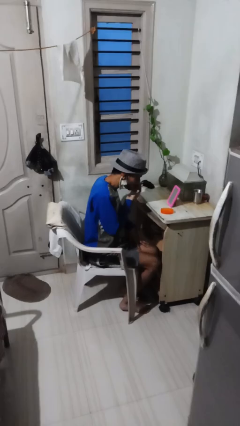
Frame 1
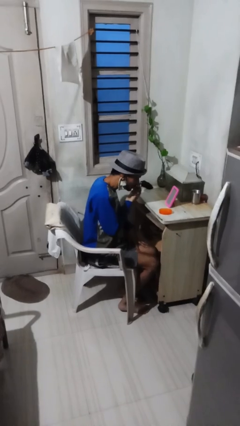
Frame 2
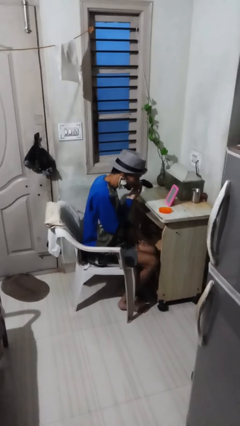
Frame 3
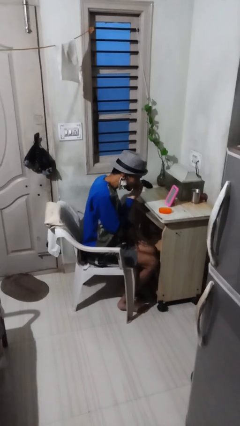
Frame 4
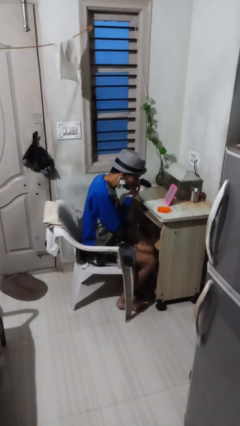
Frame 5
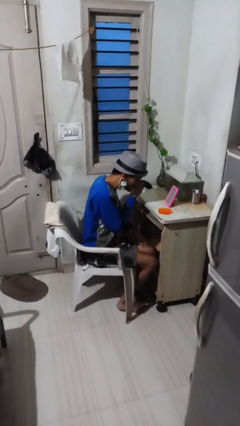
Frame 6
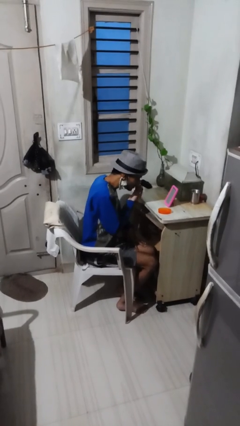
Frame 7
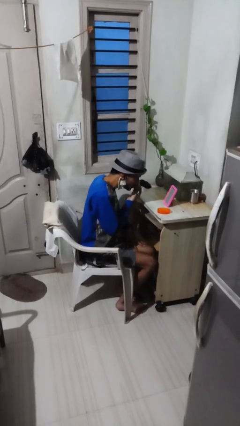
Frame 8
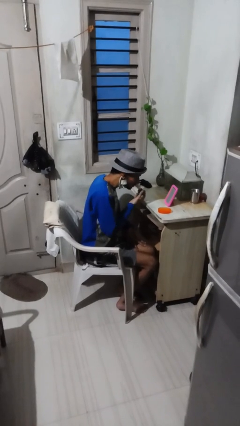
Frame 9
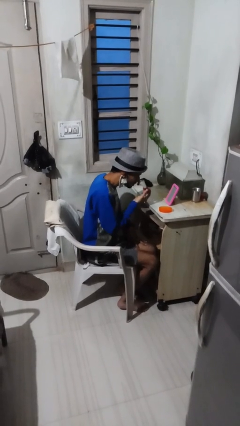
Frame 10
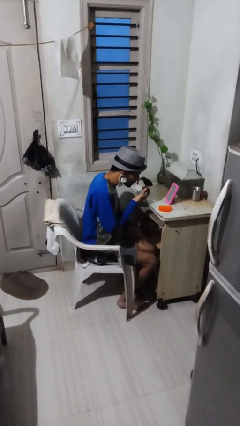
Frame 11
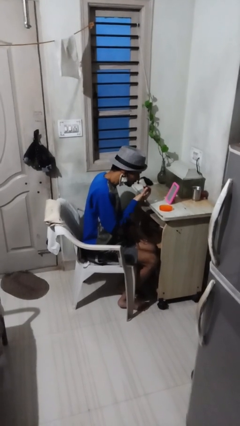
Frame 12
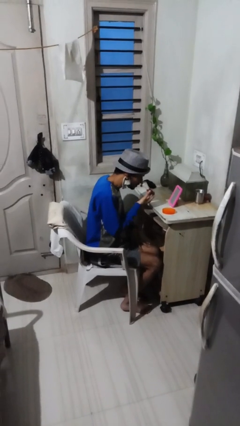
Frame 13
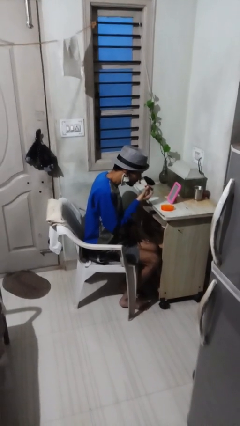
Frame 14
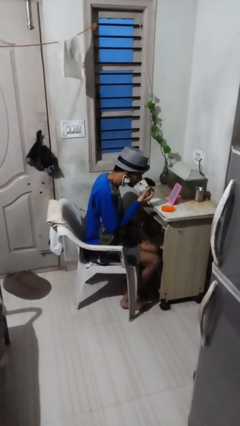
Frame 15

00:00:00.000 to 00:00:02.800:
person applies foundation makeup

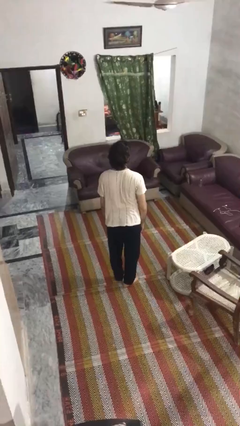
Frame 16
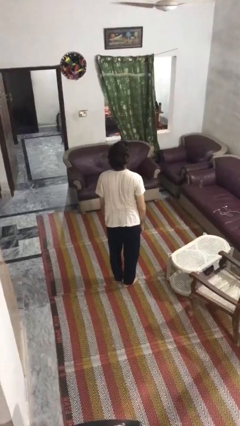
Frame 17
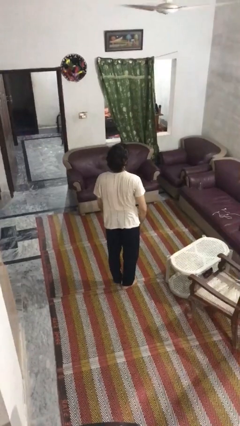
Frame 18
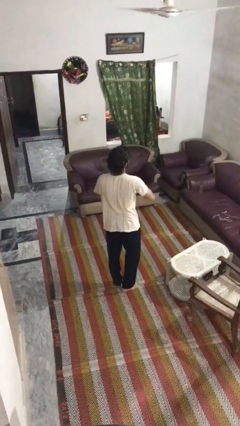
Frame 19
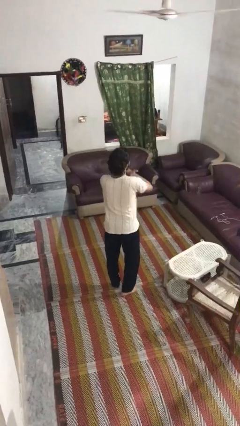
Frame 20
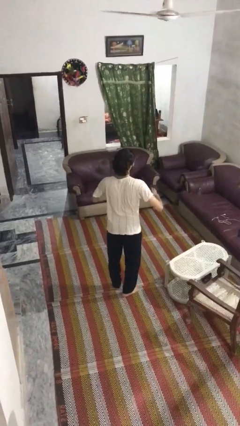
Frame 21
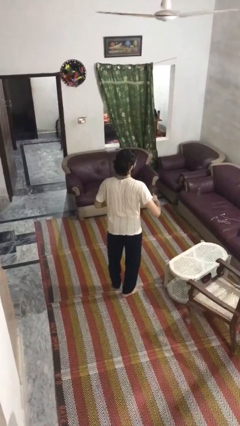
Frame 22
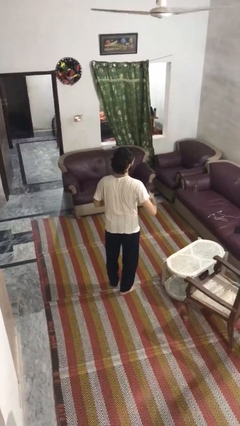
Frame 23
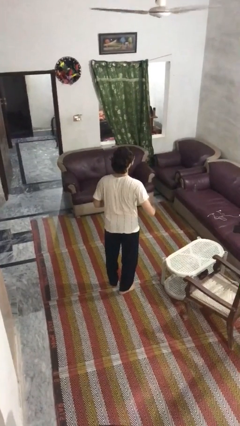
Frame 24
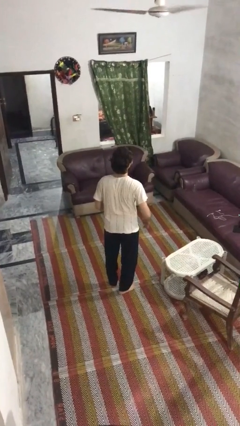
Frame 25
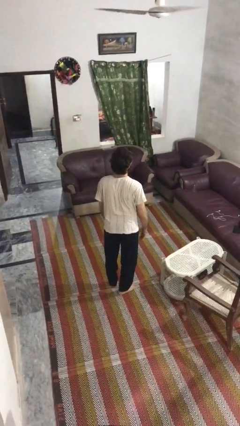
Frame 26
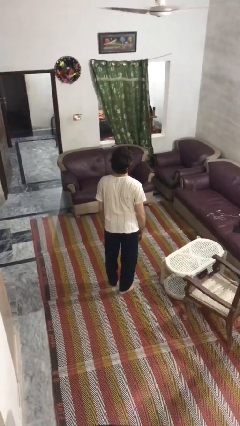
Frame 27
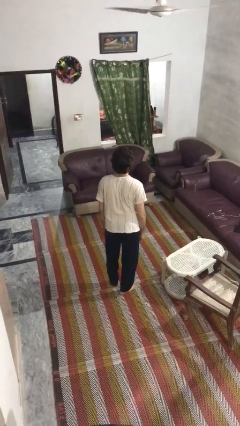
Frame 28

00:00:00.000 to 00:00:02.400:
person karate chop

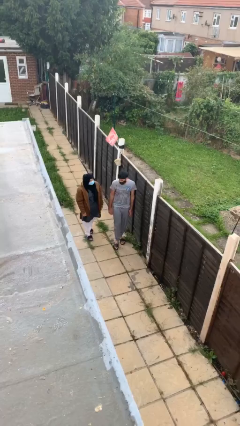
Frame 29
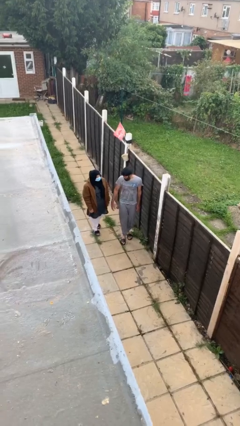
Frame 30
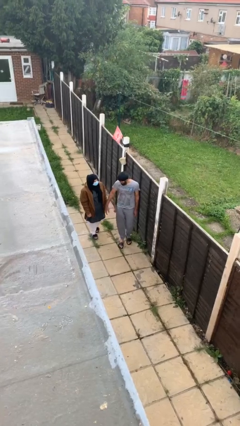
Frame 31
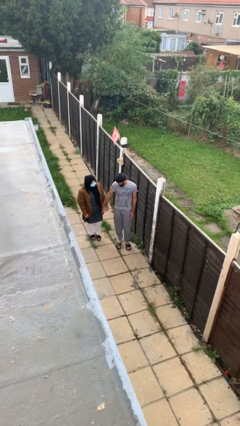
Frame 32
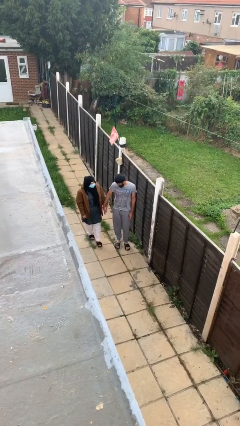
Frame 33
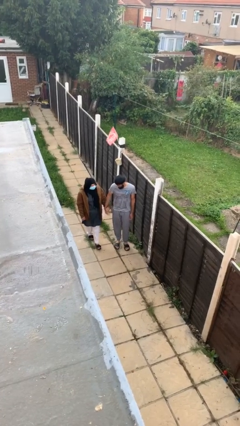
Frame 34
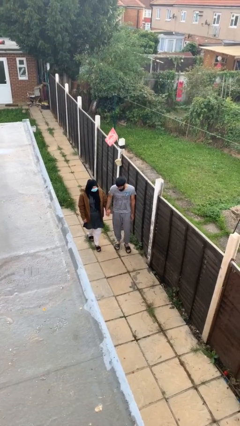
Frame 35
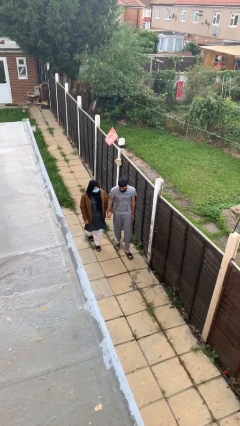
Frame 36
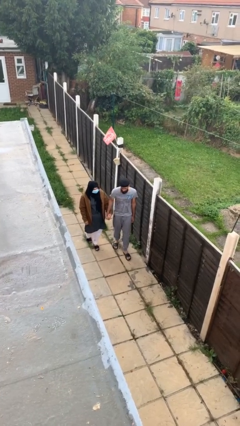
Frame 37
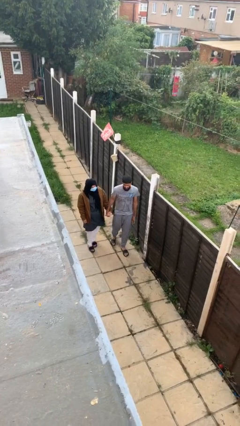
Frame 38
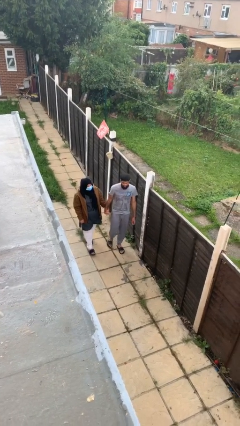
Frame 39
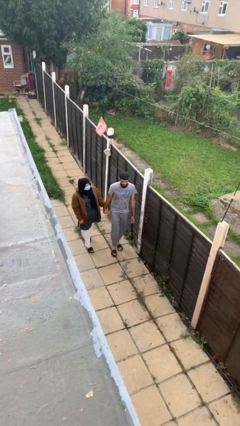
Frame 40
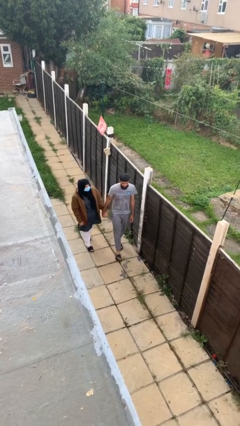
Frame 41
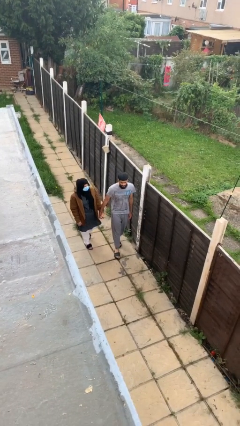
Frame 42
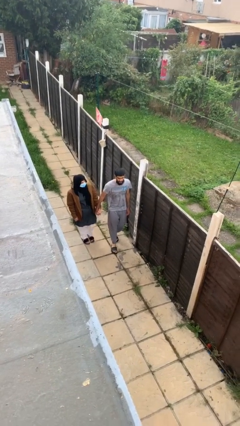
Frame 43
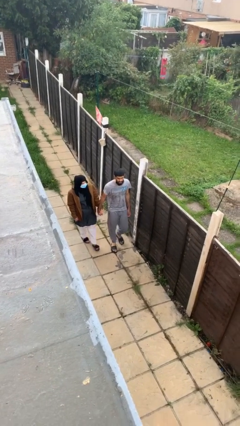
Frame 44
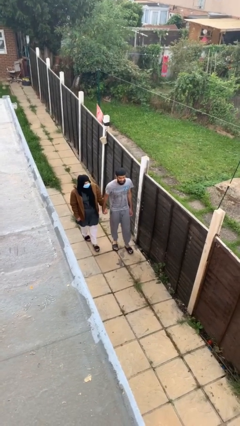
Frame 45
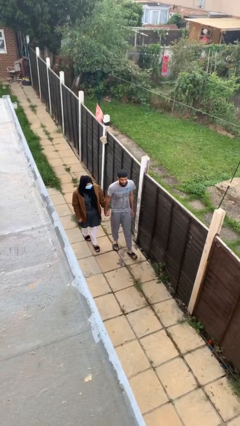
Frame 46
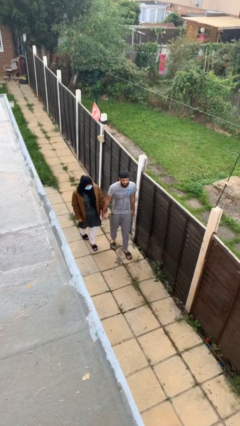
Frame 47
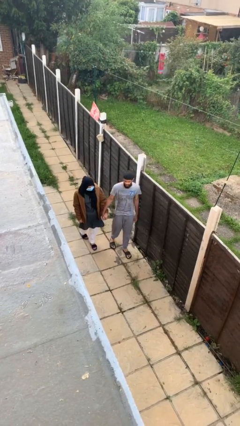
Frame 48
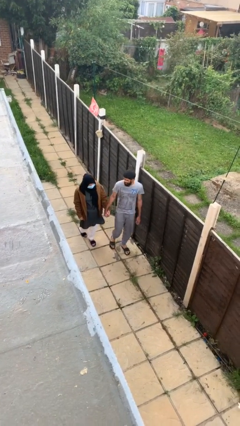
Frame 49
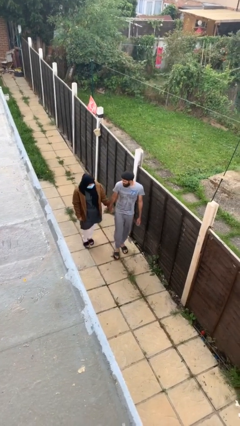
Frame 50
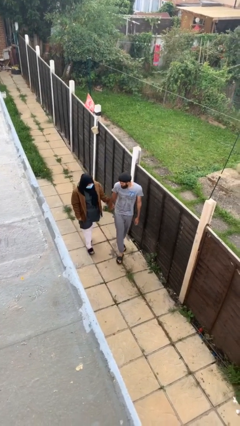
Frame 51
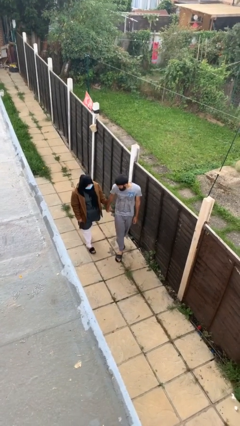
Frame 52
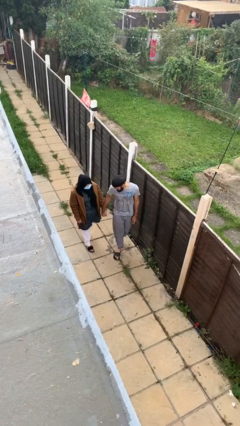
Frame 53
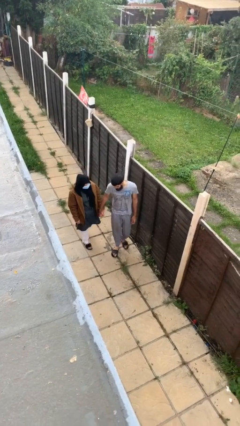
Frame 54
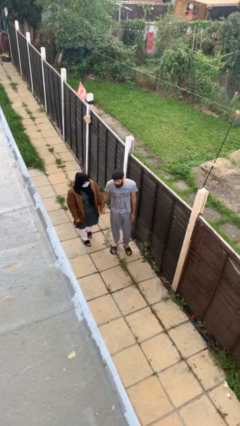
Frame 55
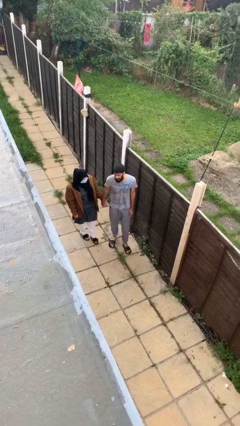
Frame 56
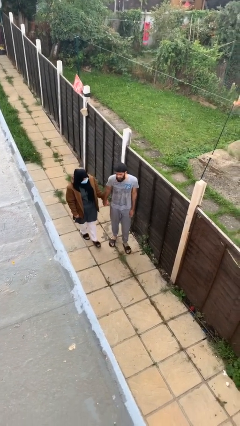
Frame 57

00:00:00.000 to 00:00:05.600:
person holds hand

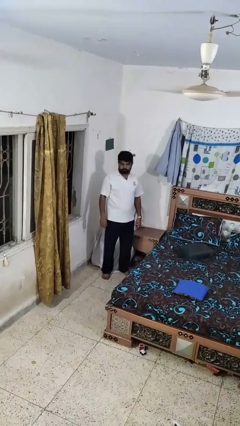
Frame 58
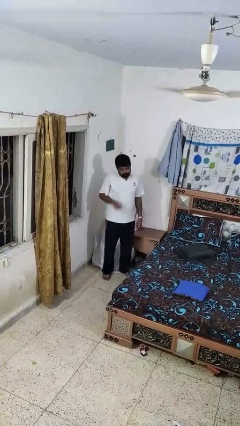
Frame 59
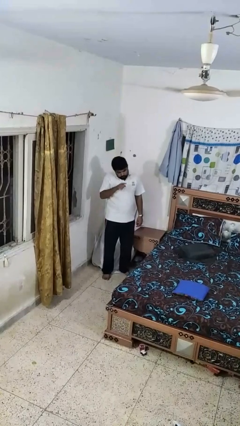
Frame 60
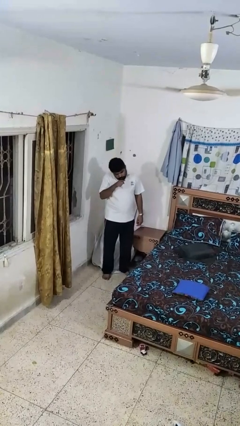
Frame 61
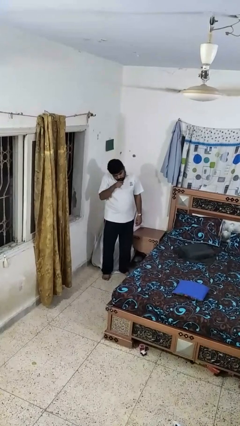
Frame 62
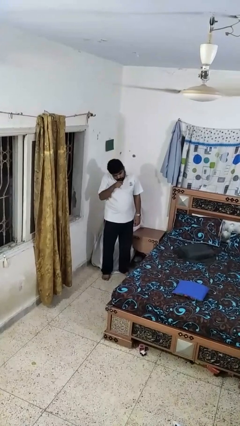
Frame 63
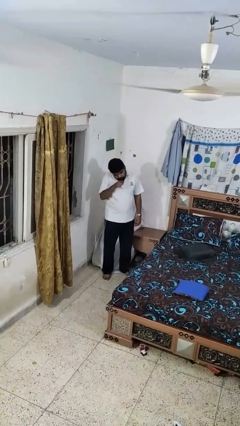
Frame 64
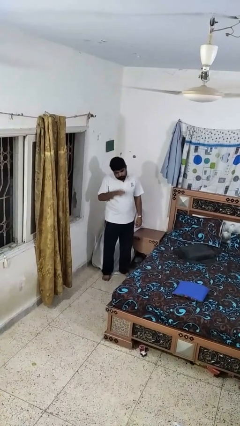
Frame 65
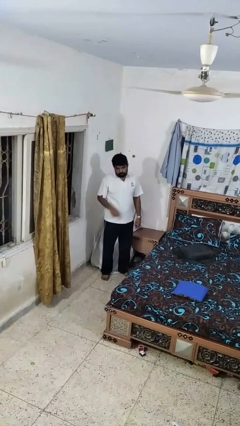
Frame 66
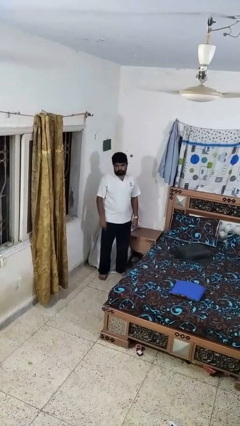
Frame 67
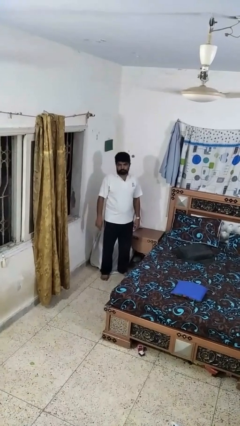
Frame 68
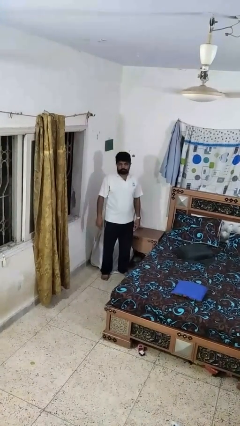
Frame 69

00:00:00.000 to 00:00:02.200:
person points at person

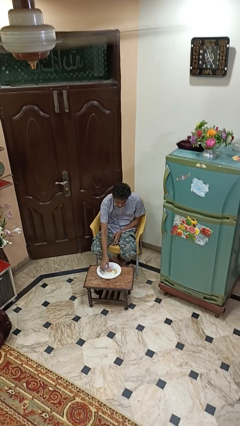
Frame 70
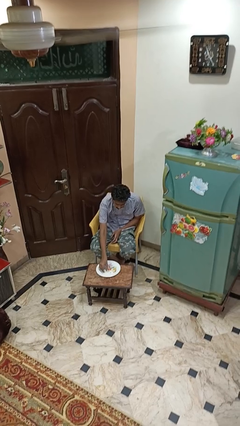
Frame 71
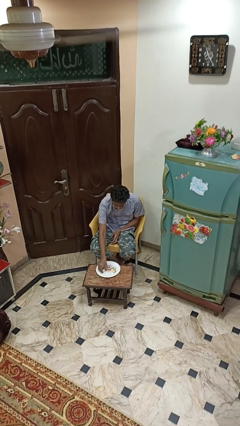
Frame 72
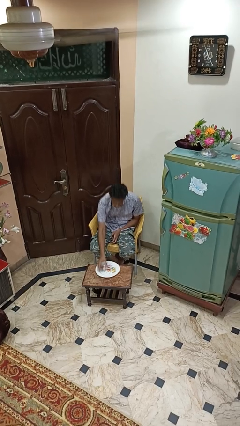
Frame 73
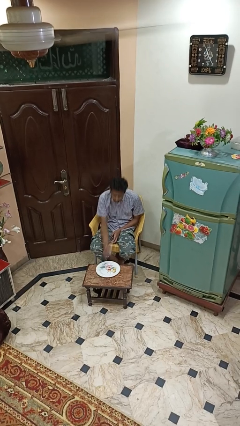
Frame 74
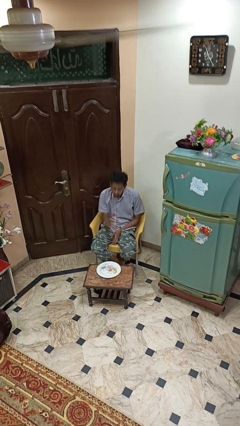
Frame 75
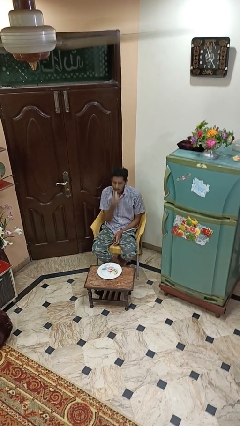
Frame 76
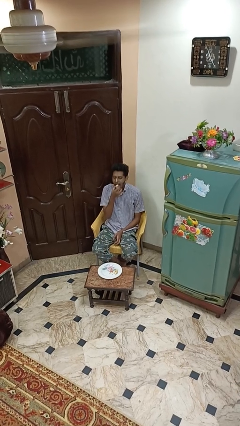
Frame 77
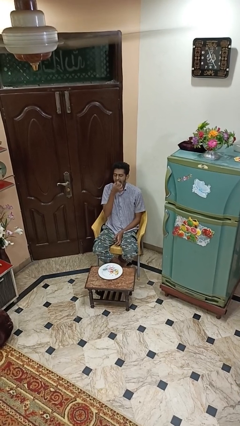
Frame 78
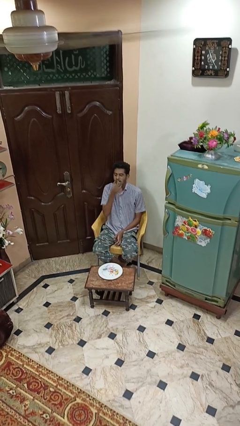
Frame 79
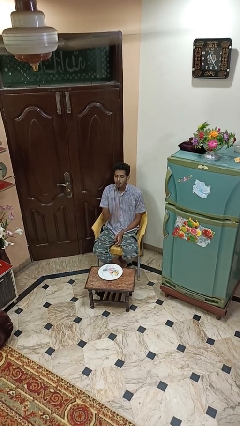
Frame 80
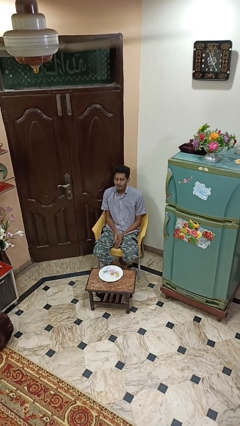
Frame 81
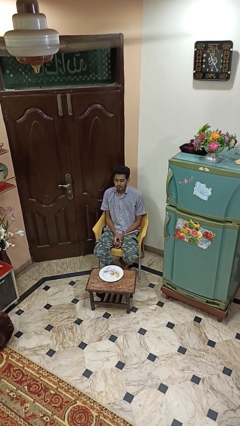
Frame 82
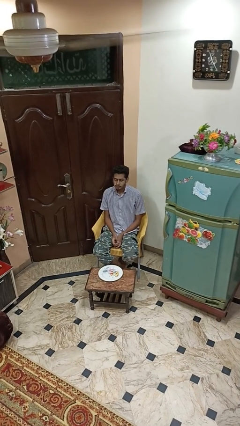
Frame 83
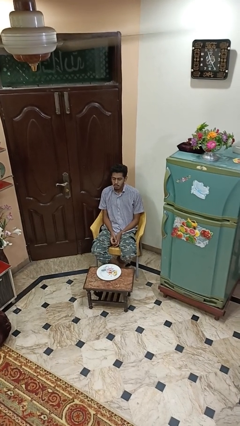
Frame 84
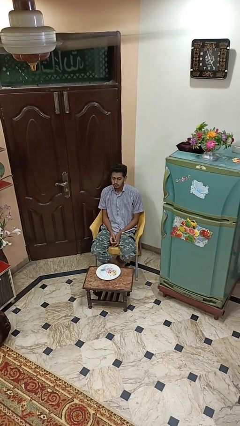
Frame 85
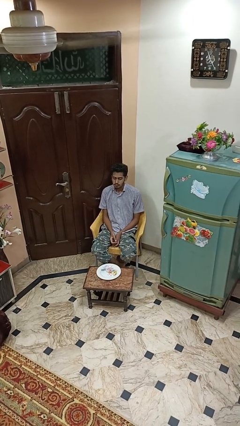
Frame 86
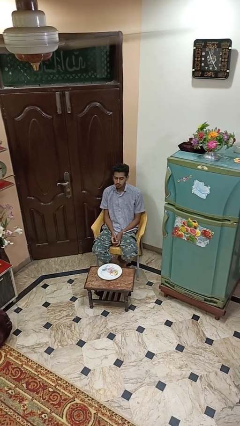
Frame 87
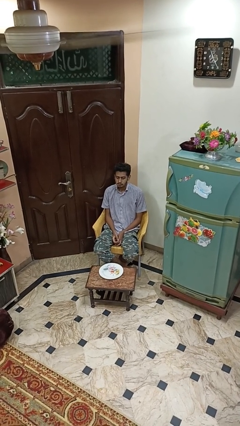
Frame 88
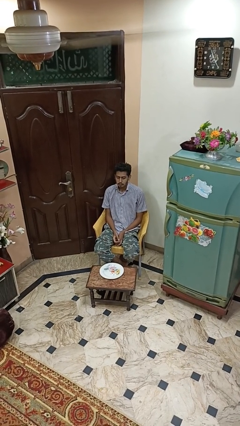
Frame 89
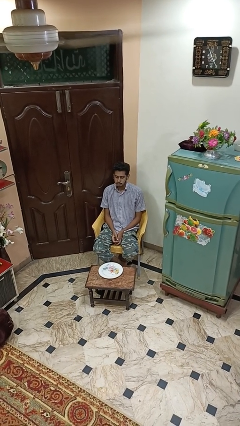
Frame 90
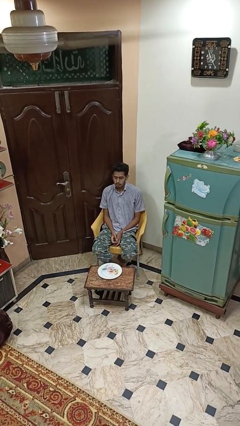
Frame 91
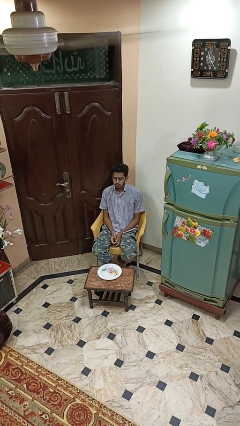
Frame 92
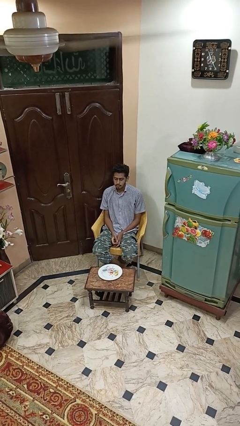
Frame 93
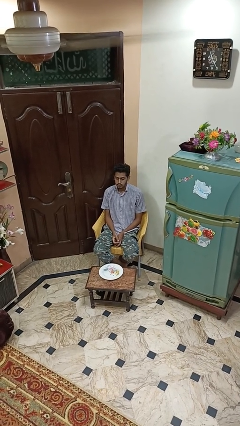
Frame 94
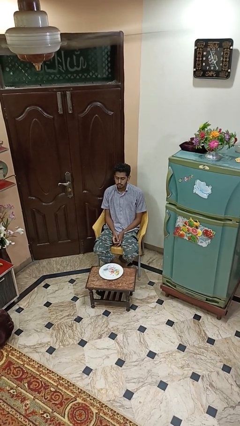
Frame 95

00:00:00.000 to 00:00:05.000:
person eats with hands
